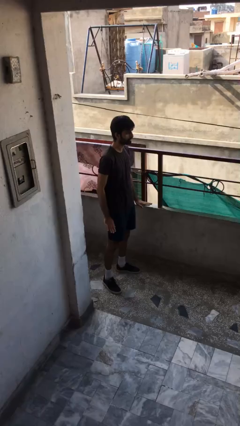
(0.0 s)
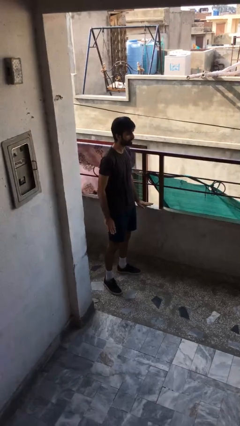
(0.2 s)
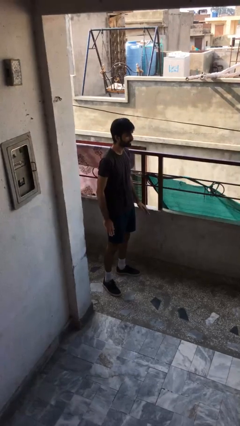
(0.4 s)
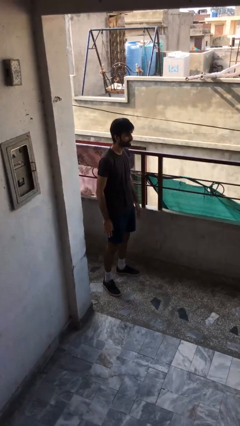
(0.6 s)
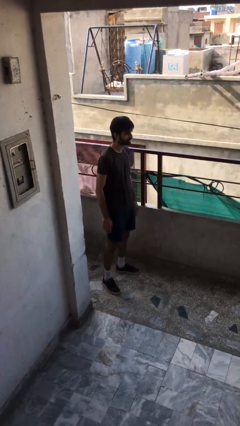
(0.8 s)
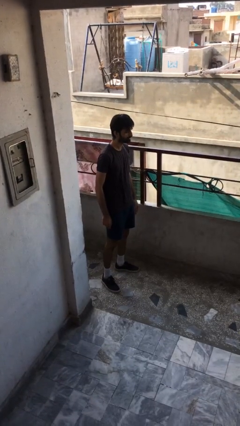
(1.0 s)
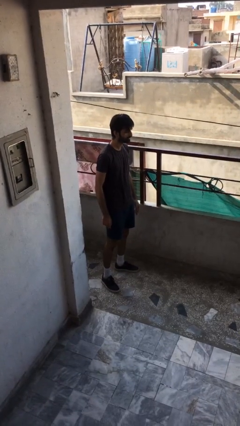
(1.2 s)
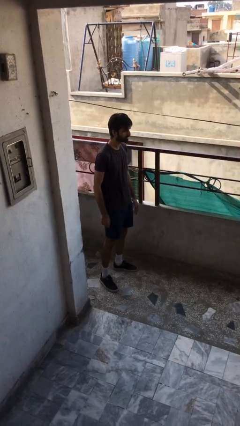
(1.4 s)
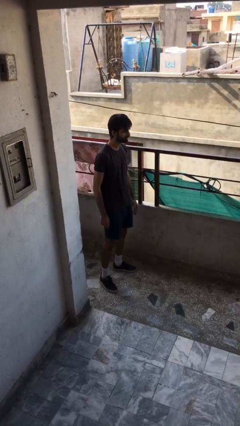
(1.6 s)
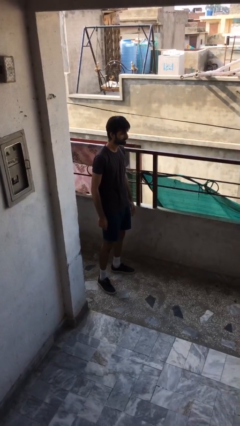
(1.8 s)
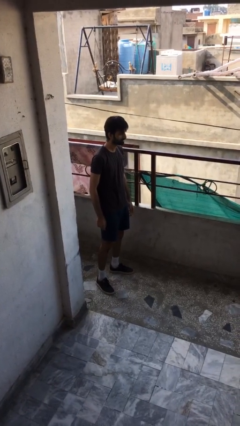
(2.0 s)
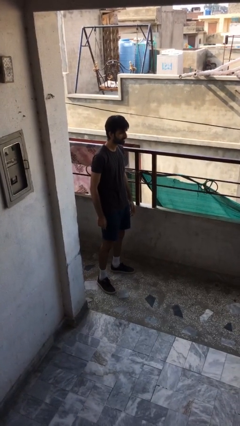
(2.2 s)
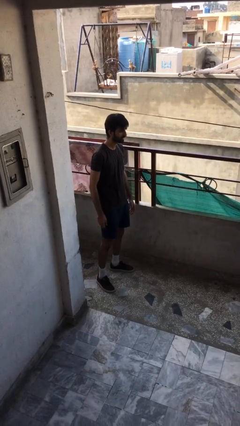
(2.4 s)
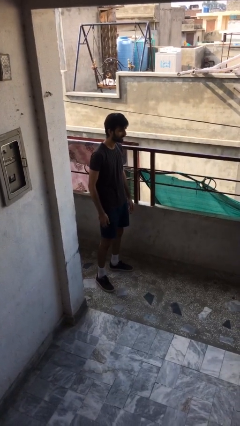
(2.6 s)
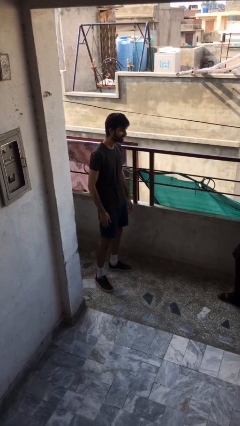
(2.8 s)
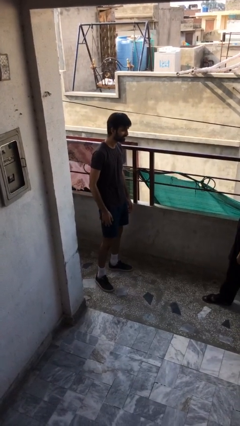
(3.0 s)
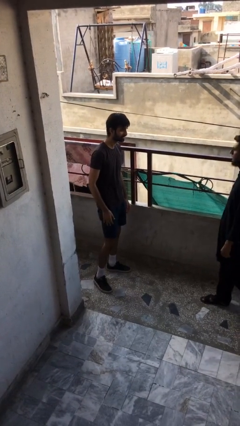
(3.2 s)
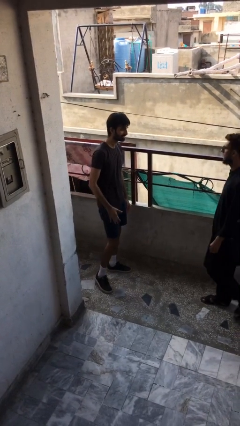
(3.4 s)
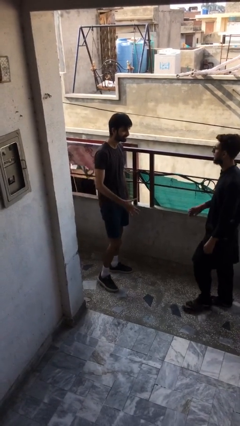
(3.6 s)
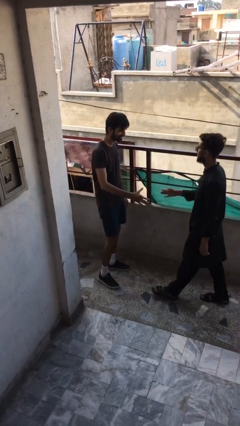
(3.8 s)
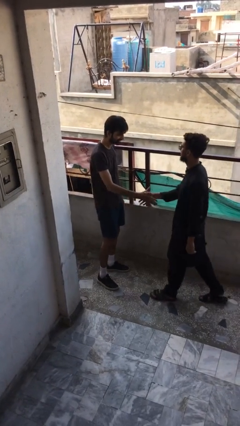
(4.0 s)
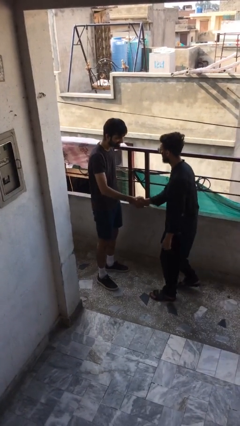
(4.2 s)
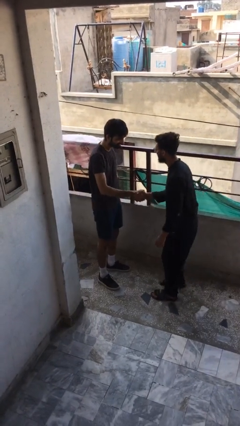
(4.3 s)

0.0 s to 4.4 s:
person shakes hand

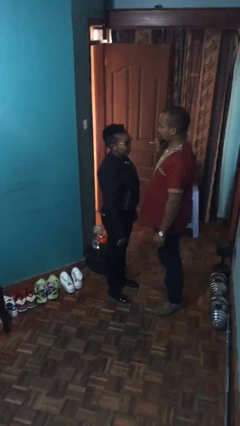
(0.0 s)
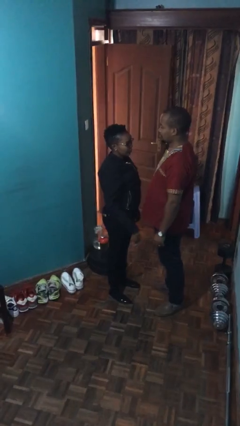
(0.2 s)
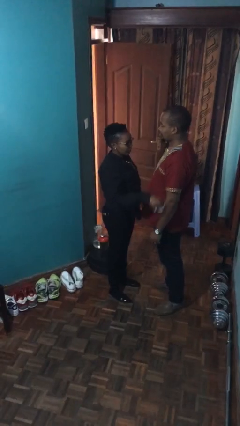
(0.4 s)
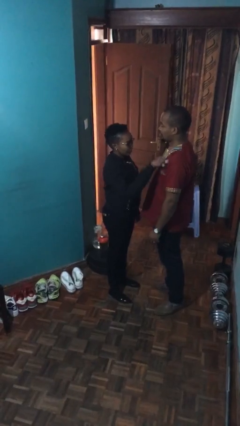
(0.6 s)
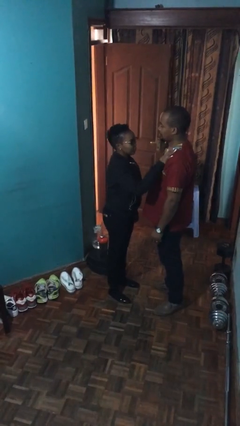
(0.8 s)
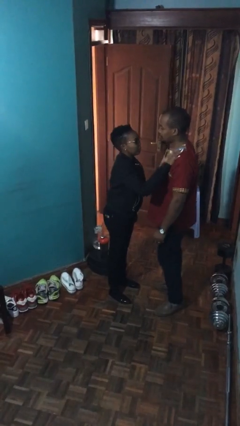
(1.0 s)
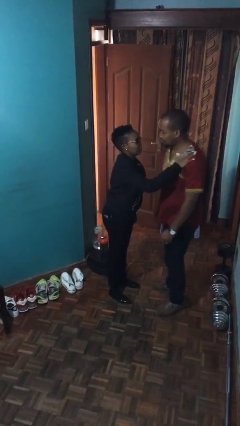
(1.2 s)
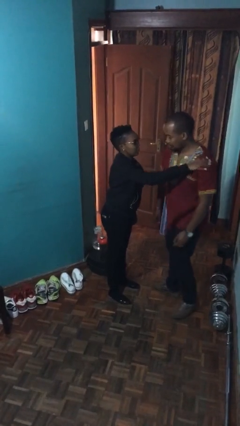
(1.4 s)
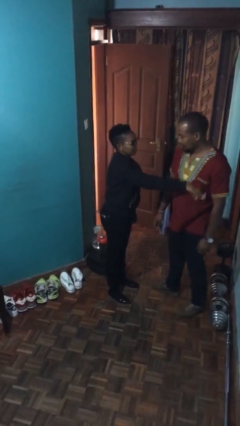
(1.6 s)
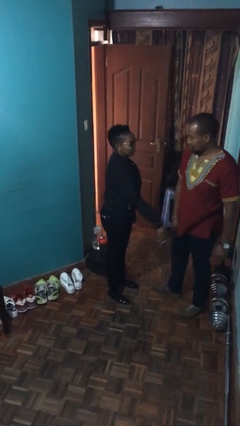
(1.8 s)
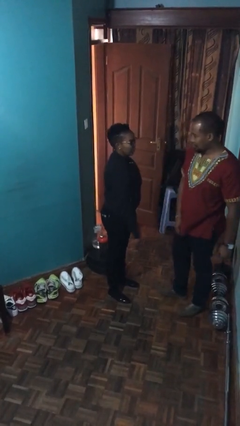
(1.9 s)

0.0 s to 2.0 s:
person shoves person

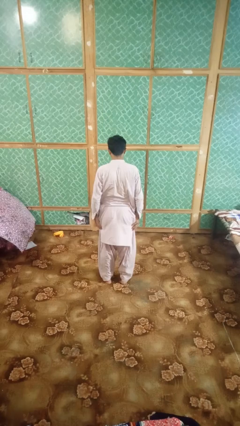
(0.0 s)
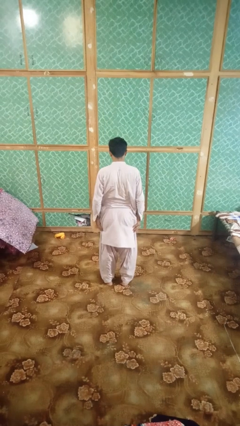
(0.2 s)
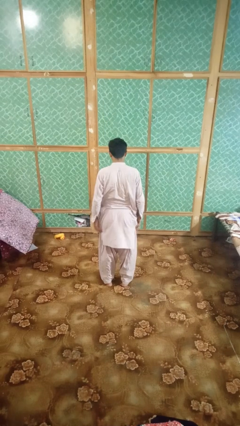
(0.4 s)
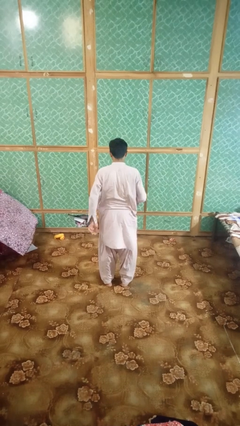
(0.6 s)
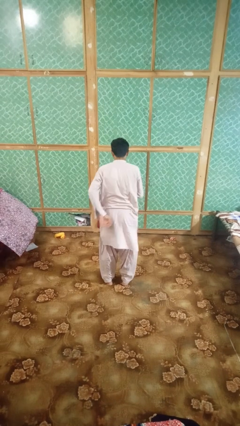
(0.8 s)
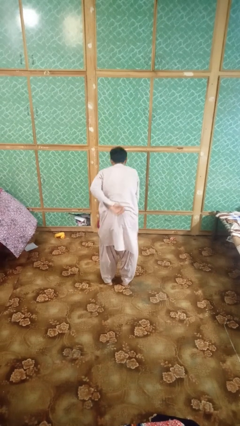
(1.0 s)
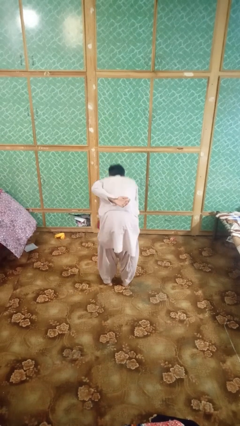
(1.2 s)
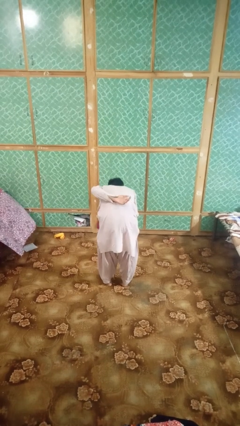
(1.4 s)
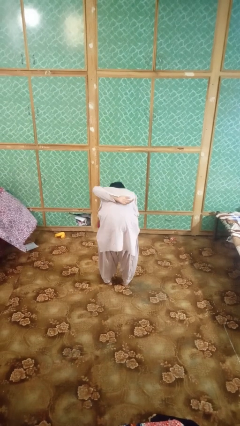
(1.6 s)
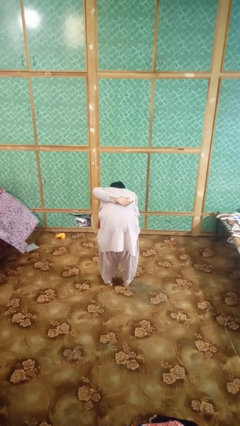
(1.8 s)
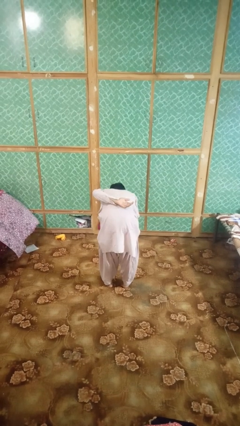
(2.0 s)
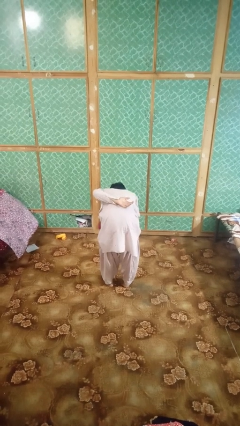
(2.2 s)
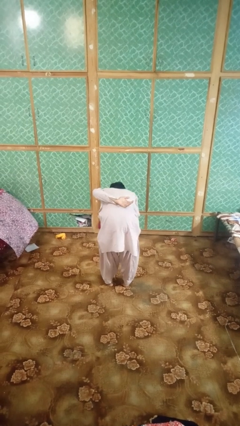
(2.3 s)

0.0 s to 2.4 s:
person bows

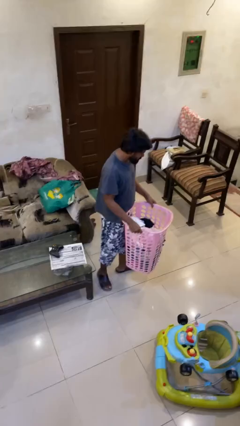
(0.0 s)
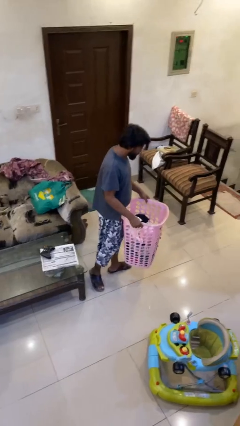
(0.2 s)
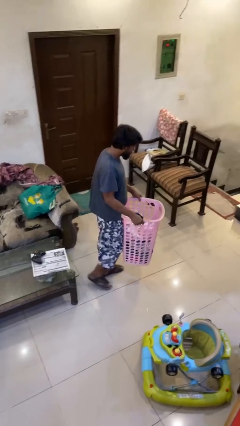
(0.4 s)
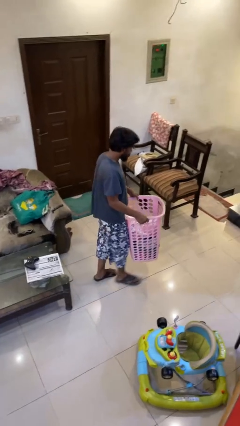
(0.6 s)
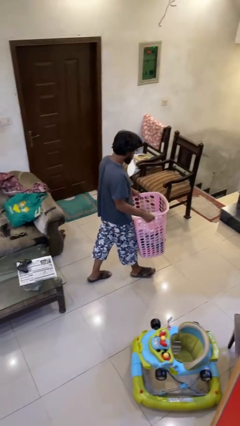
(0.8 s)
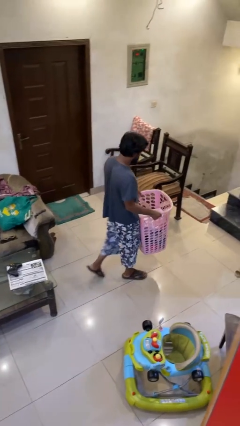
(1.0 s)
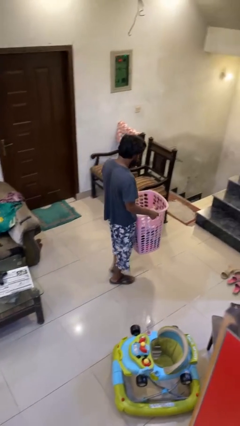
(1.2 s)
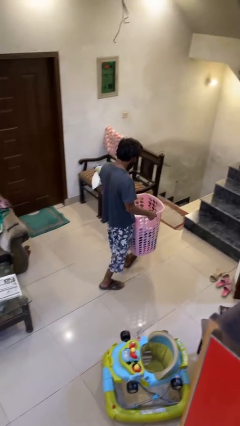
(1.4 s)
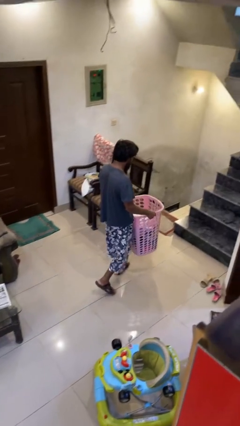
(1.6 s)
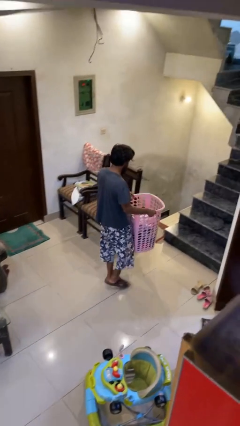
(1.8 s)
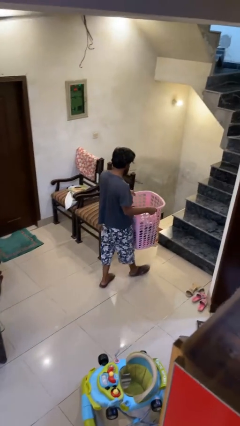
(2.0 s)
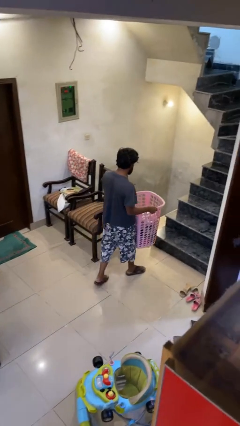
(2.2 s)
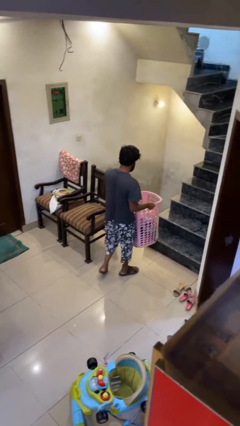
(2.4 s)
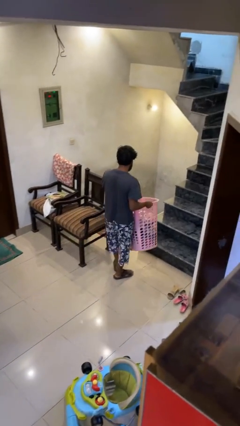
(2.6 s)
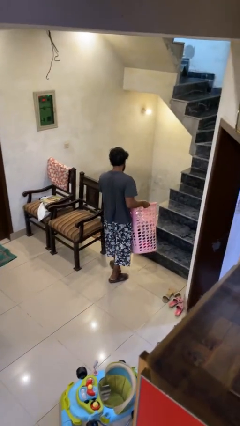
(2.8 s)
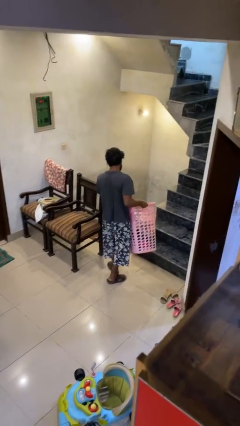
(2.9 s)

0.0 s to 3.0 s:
person carries laundry basket

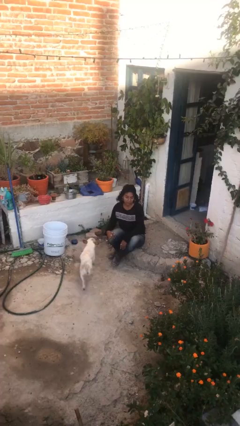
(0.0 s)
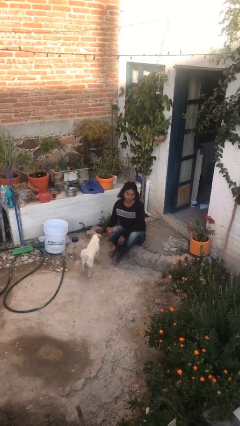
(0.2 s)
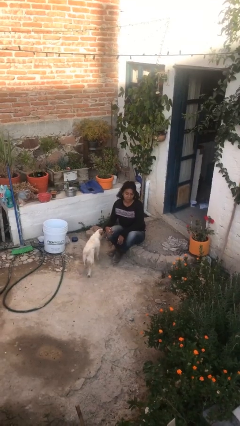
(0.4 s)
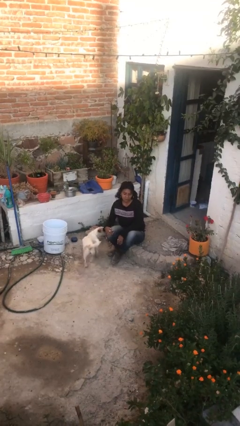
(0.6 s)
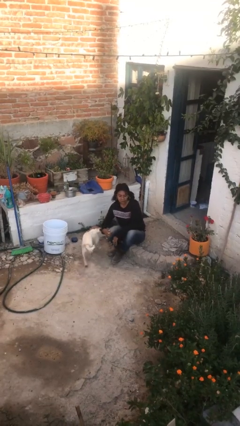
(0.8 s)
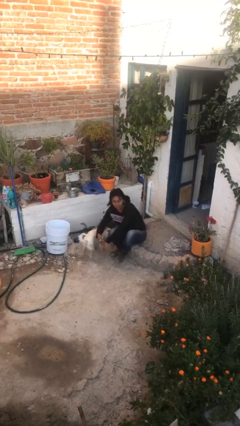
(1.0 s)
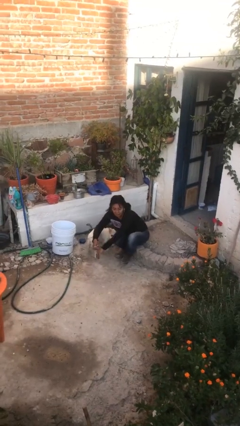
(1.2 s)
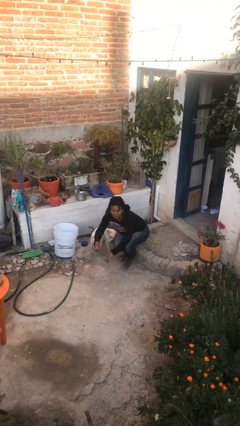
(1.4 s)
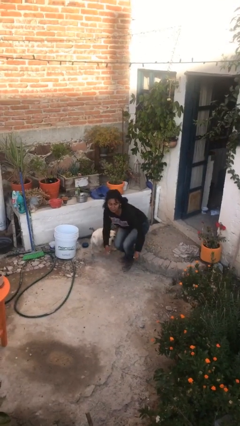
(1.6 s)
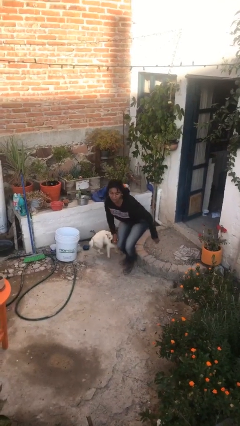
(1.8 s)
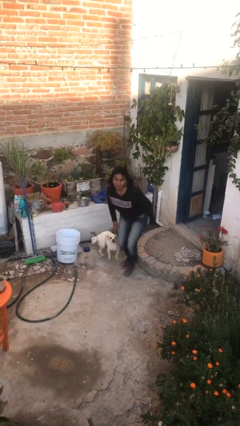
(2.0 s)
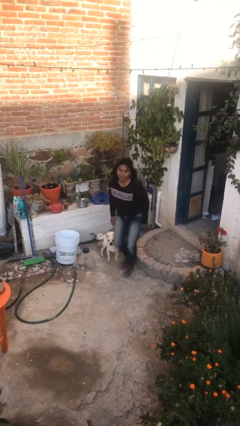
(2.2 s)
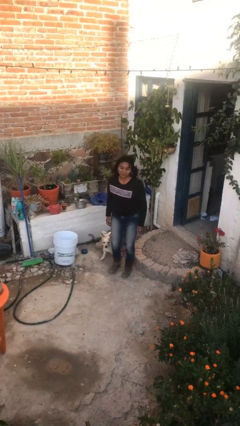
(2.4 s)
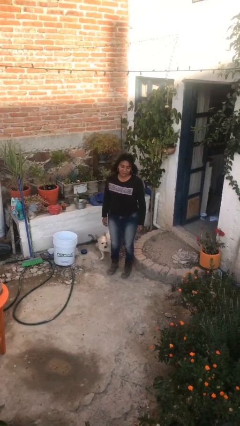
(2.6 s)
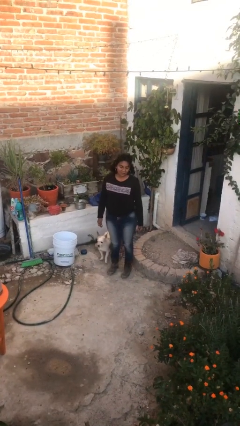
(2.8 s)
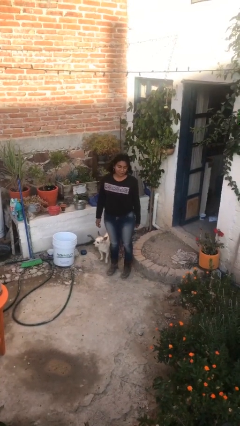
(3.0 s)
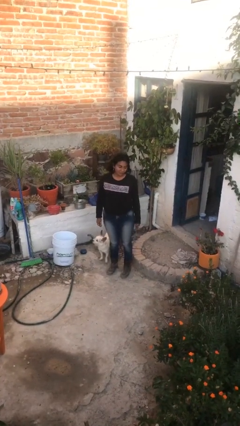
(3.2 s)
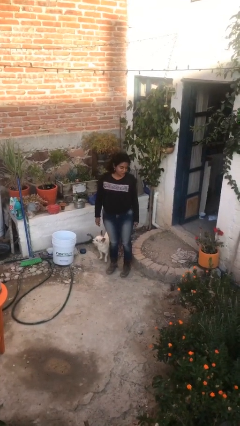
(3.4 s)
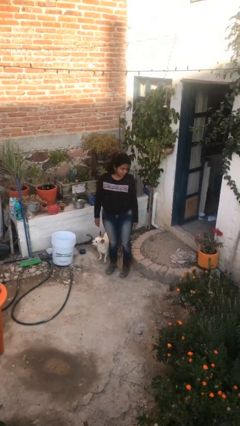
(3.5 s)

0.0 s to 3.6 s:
person stands up

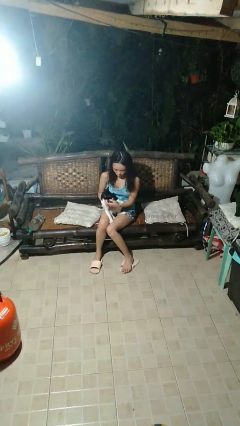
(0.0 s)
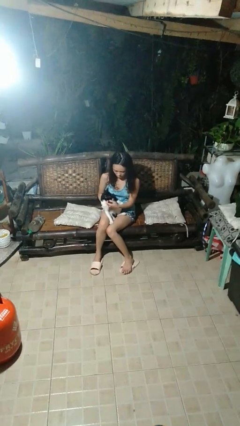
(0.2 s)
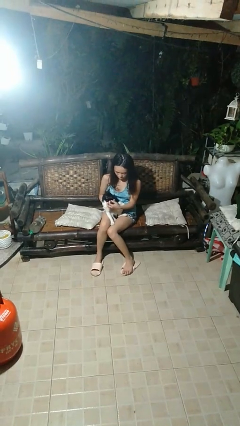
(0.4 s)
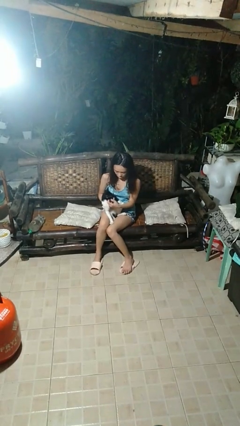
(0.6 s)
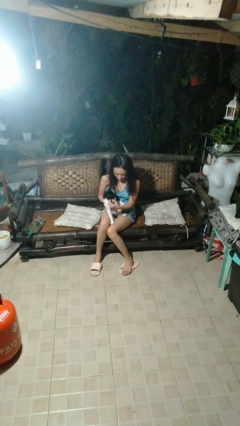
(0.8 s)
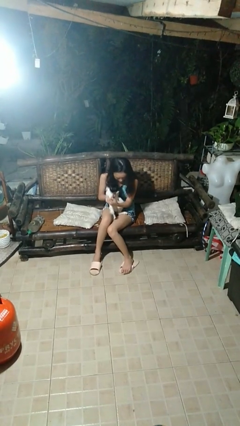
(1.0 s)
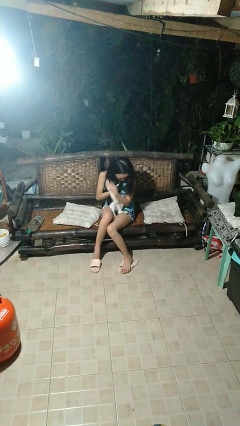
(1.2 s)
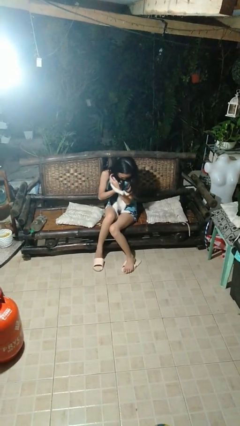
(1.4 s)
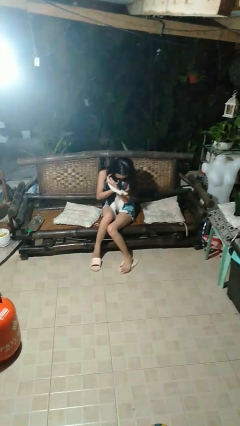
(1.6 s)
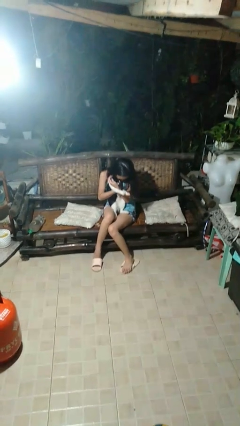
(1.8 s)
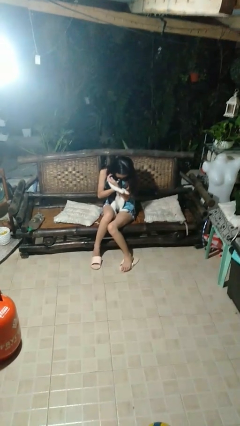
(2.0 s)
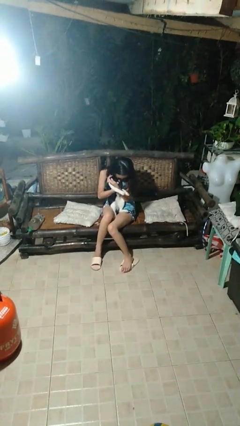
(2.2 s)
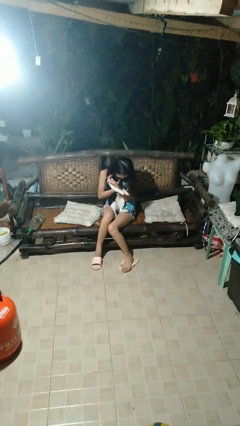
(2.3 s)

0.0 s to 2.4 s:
person hugs cat
